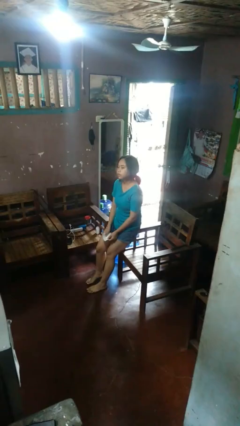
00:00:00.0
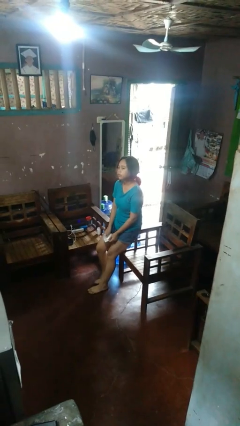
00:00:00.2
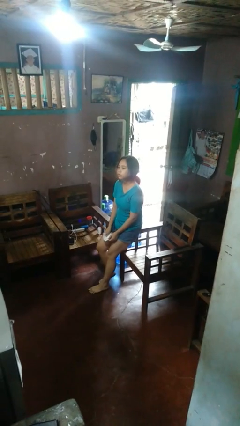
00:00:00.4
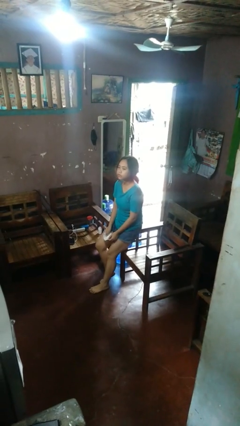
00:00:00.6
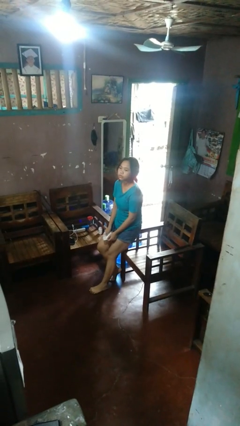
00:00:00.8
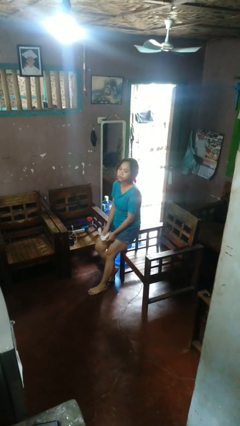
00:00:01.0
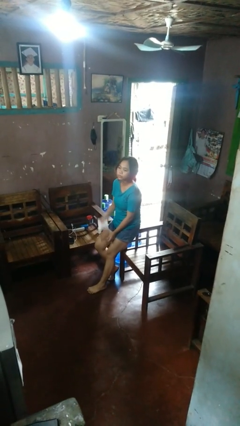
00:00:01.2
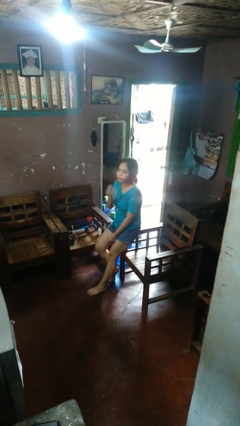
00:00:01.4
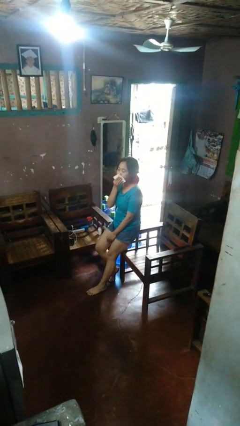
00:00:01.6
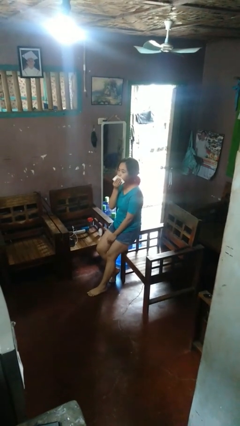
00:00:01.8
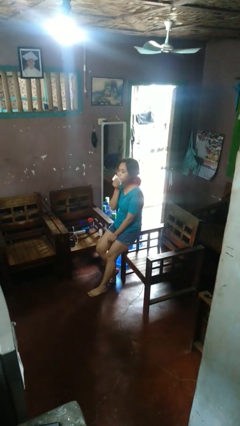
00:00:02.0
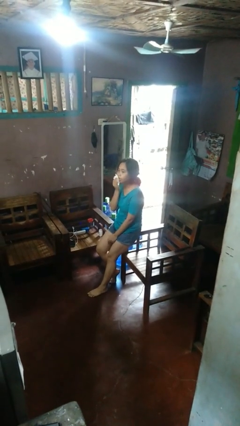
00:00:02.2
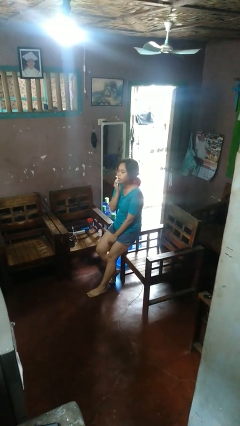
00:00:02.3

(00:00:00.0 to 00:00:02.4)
person wipes mouth with napkin

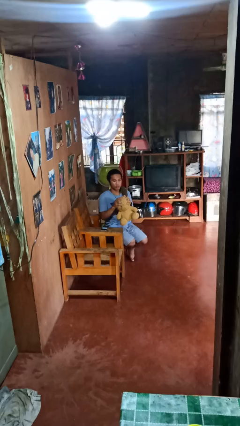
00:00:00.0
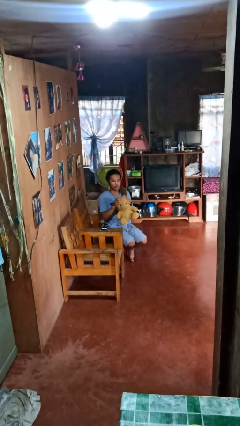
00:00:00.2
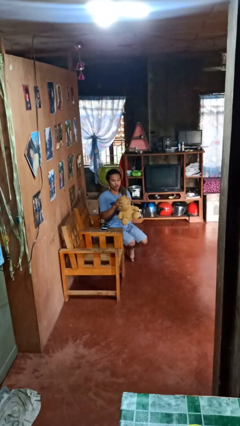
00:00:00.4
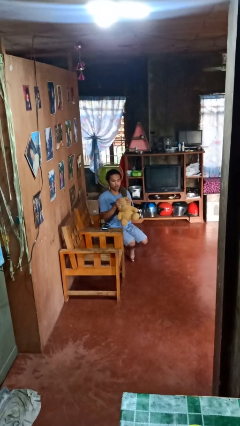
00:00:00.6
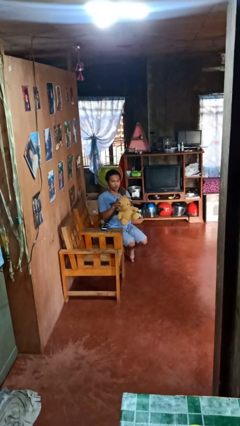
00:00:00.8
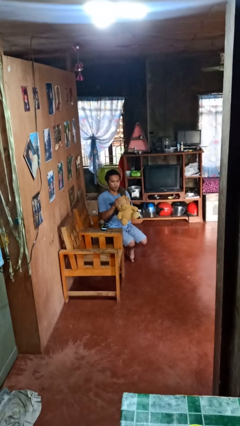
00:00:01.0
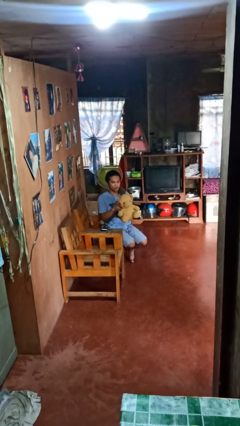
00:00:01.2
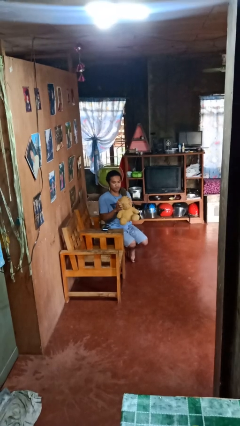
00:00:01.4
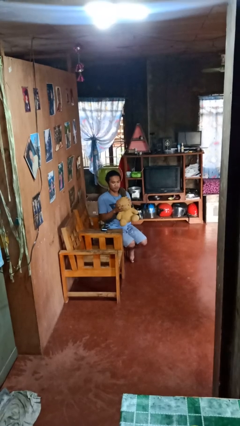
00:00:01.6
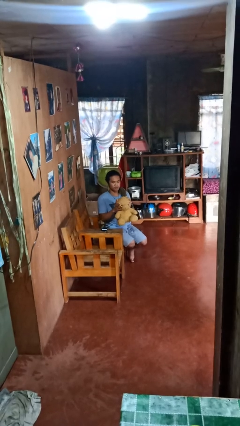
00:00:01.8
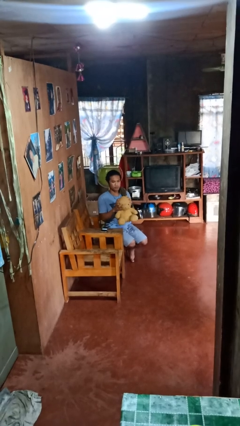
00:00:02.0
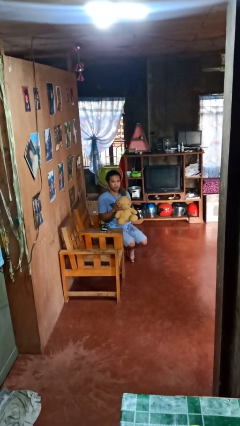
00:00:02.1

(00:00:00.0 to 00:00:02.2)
person squeezes object

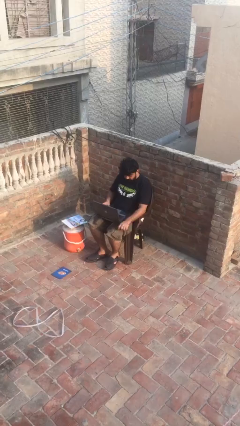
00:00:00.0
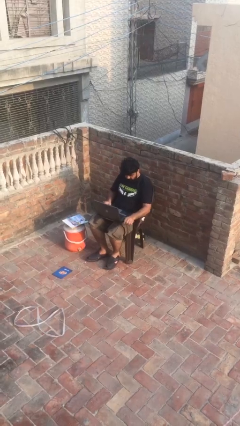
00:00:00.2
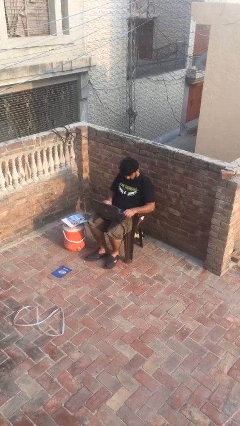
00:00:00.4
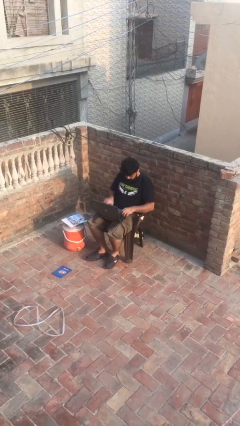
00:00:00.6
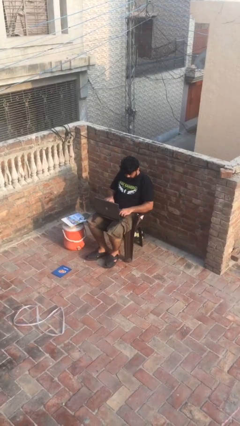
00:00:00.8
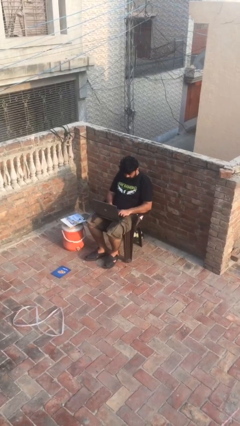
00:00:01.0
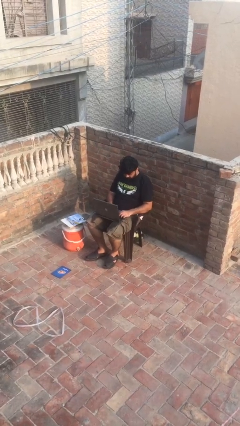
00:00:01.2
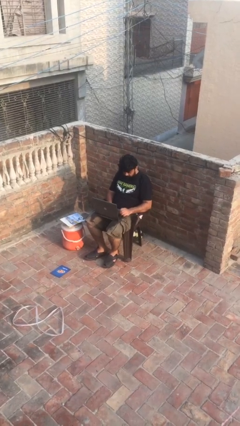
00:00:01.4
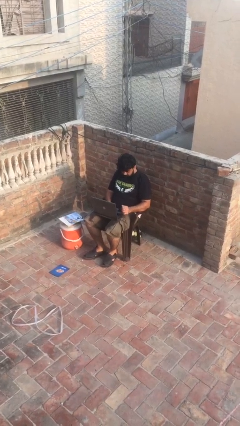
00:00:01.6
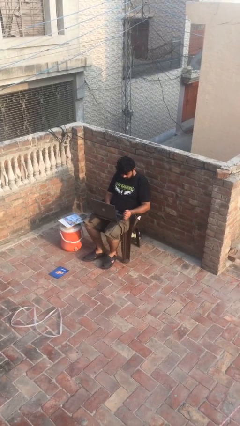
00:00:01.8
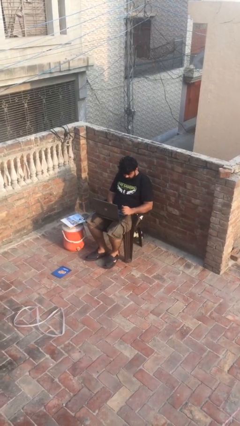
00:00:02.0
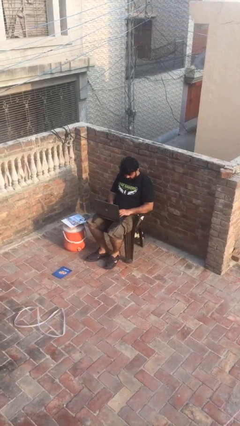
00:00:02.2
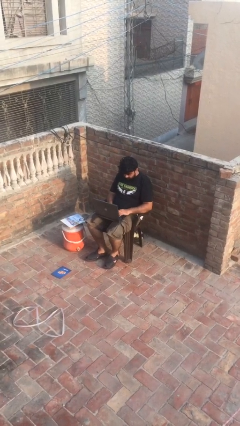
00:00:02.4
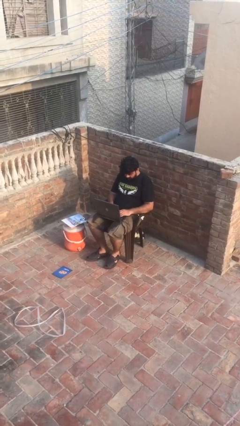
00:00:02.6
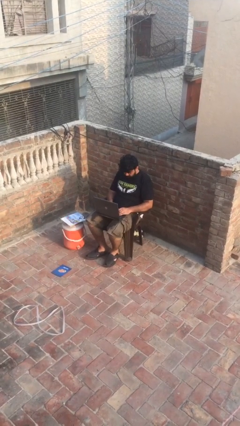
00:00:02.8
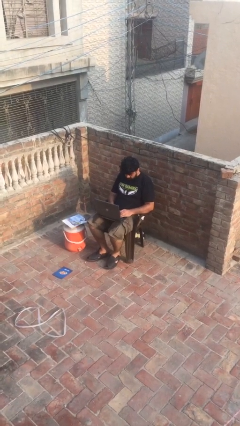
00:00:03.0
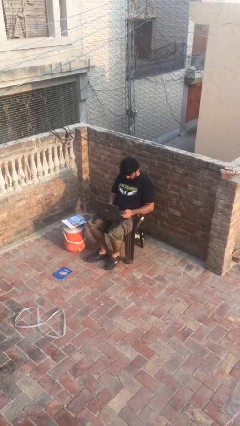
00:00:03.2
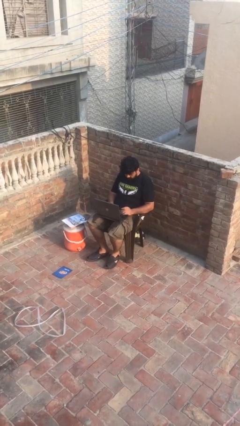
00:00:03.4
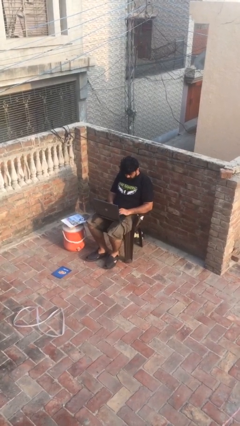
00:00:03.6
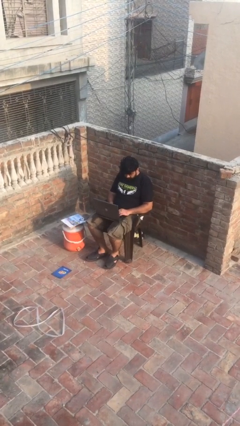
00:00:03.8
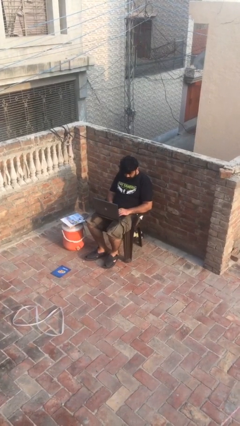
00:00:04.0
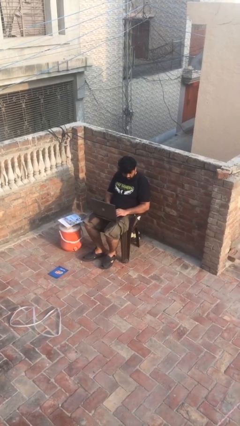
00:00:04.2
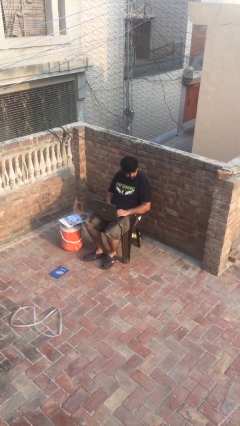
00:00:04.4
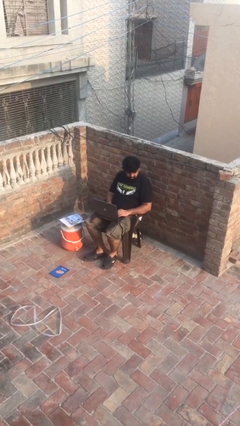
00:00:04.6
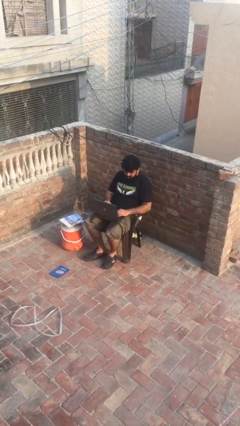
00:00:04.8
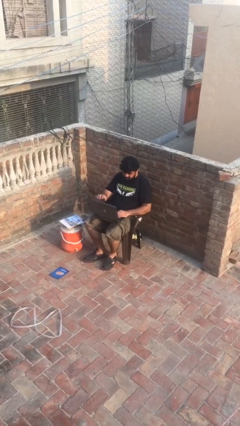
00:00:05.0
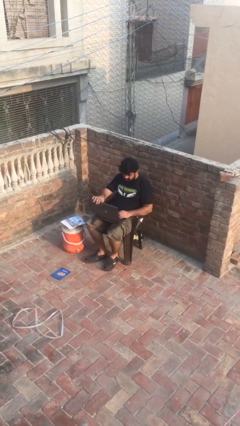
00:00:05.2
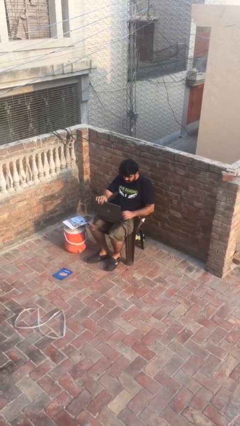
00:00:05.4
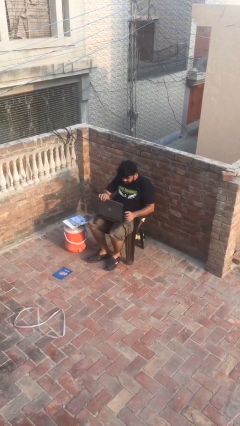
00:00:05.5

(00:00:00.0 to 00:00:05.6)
person interacts with laptop

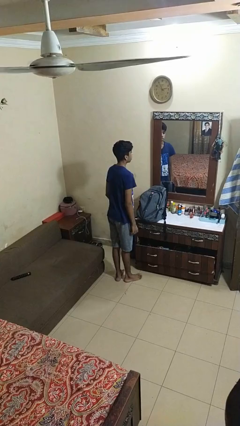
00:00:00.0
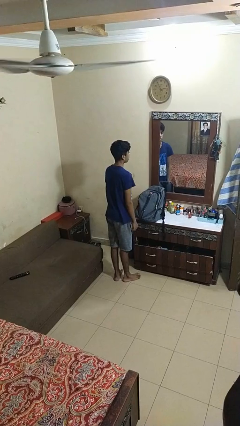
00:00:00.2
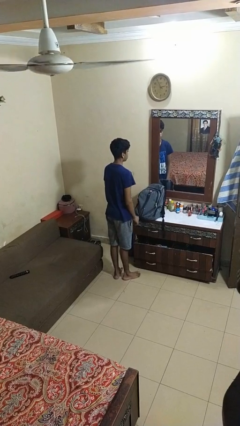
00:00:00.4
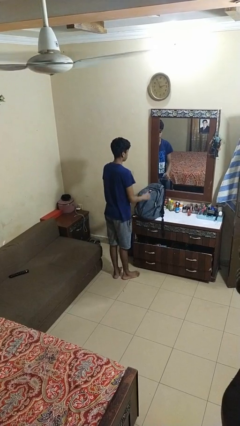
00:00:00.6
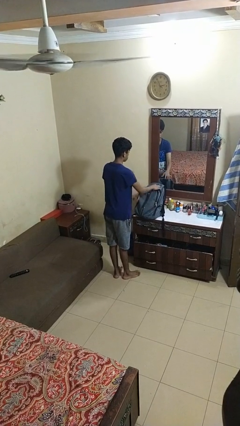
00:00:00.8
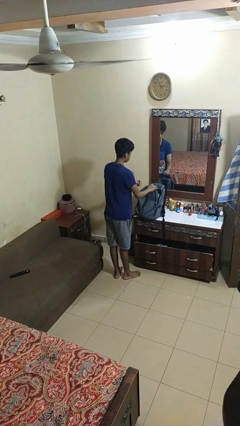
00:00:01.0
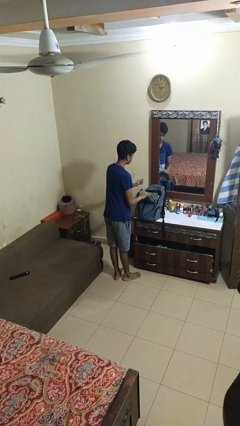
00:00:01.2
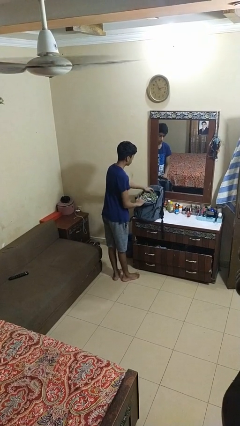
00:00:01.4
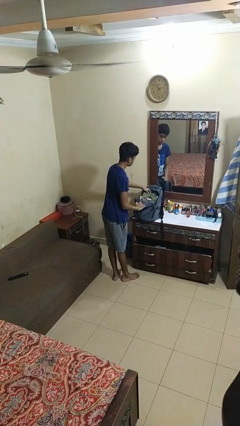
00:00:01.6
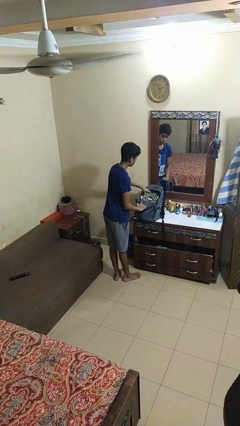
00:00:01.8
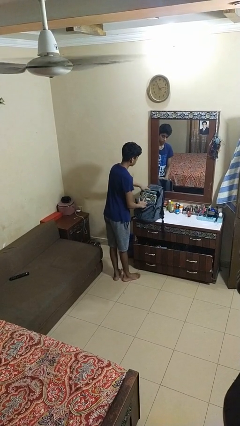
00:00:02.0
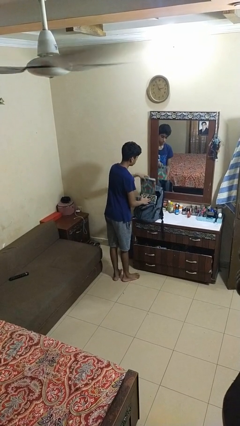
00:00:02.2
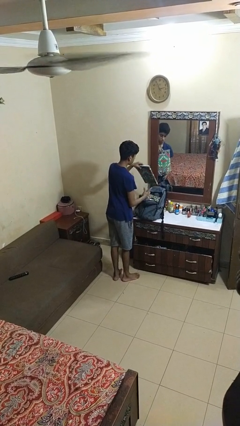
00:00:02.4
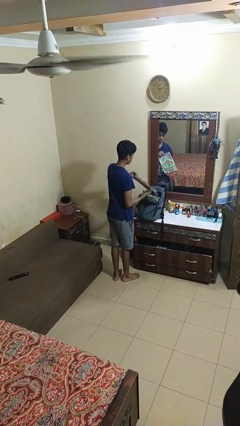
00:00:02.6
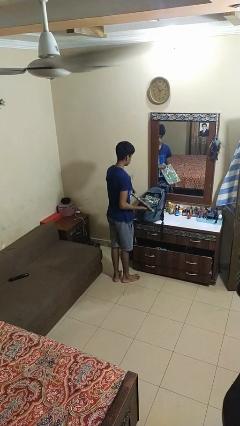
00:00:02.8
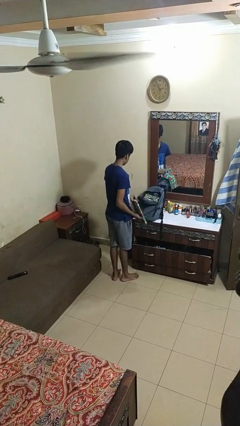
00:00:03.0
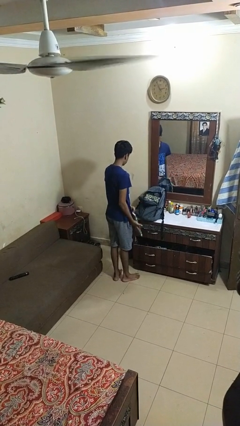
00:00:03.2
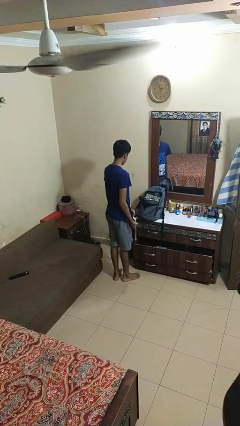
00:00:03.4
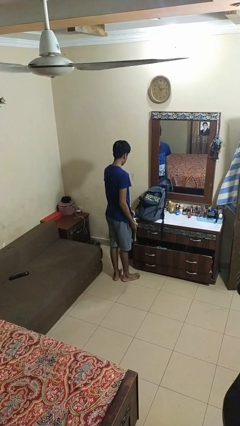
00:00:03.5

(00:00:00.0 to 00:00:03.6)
person takes object from bag

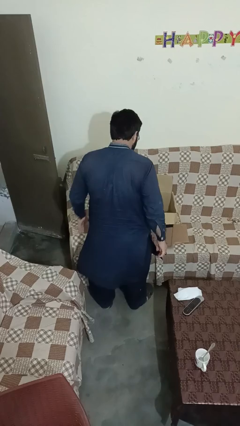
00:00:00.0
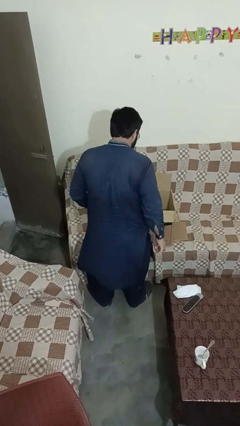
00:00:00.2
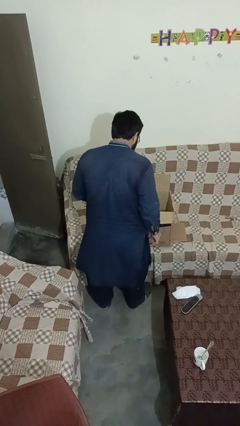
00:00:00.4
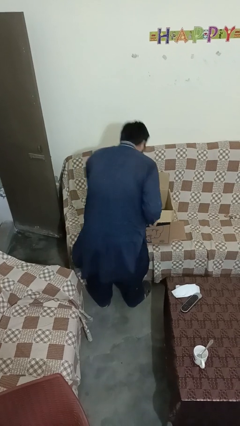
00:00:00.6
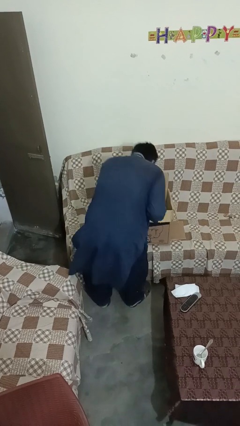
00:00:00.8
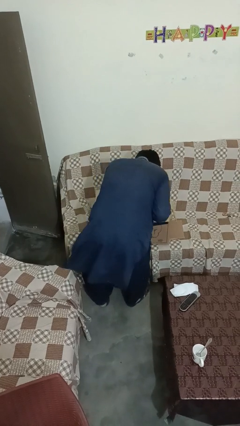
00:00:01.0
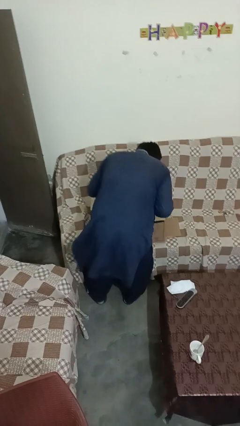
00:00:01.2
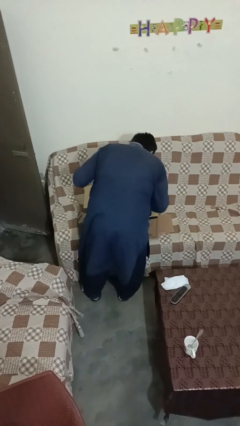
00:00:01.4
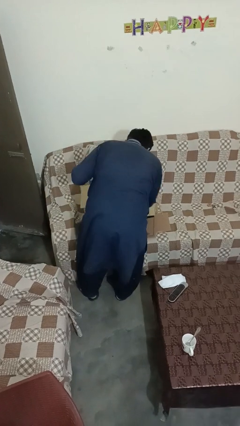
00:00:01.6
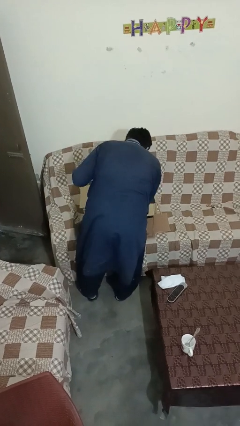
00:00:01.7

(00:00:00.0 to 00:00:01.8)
person searches in box

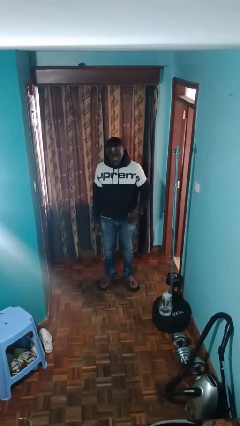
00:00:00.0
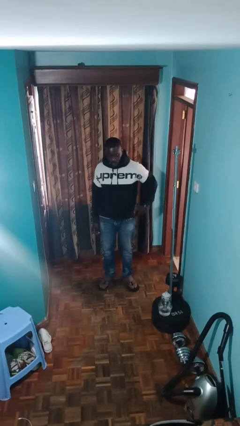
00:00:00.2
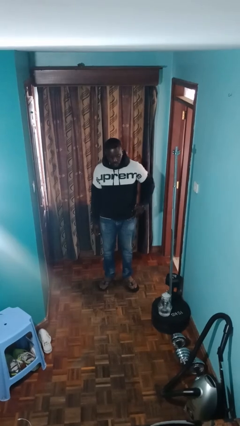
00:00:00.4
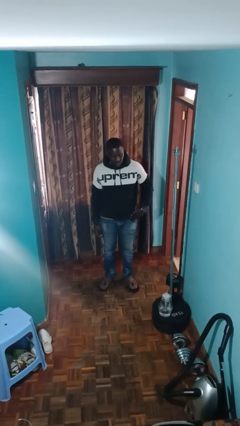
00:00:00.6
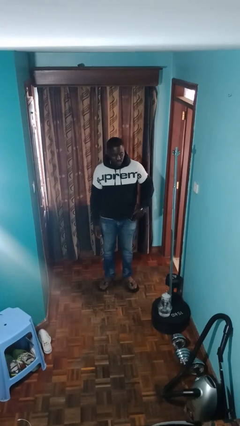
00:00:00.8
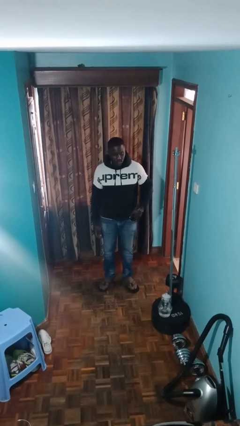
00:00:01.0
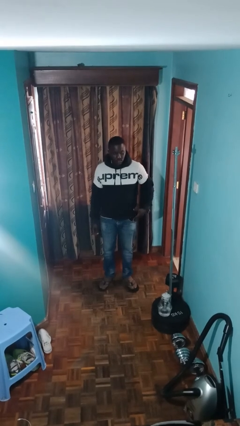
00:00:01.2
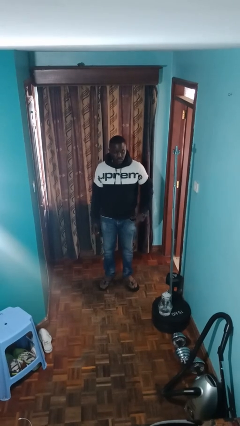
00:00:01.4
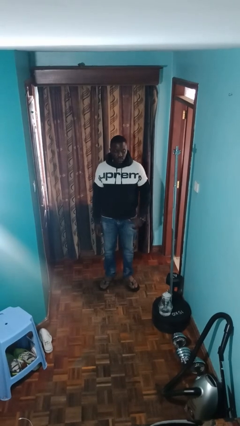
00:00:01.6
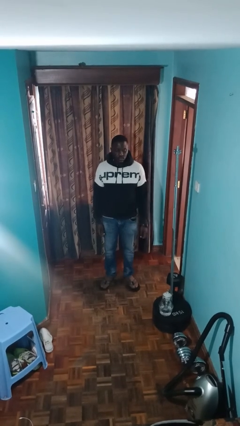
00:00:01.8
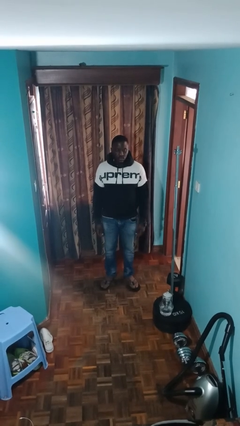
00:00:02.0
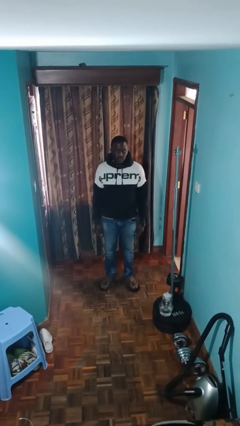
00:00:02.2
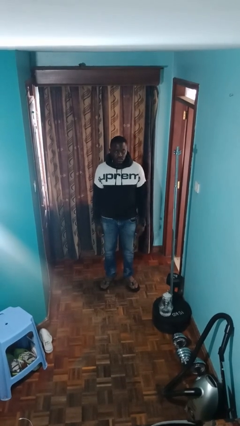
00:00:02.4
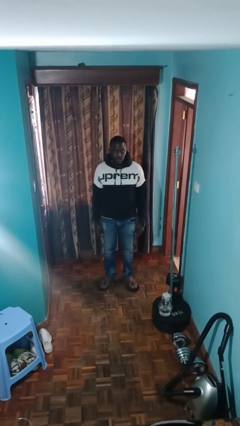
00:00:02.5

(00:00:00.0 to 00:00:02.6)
person puts phone into pocket
